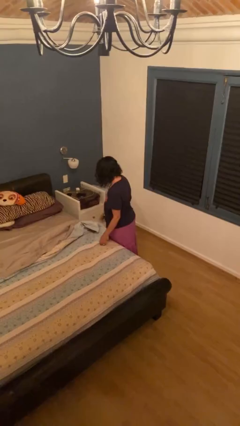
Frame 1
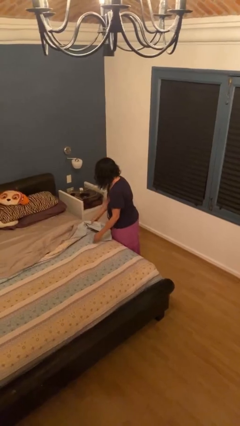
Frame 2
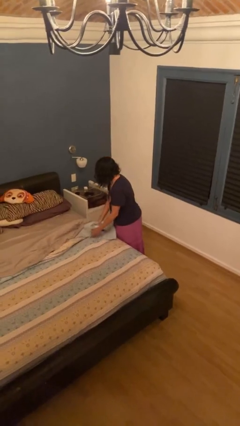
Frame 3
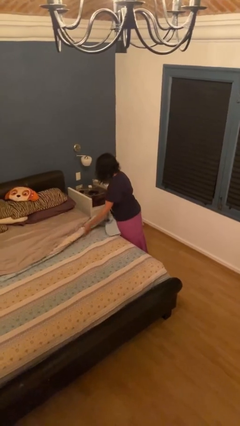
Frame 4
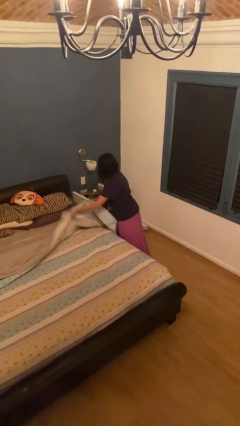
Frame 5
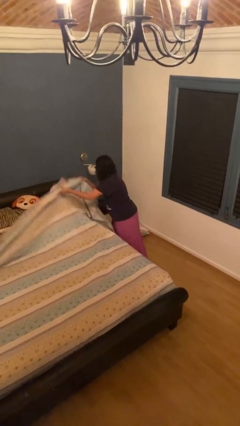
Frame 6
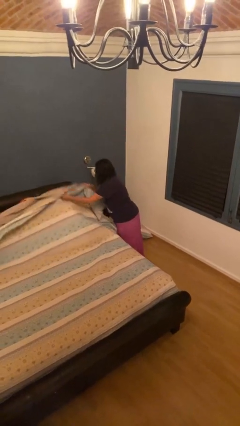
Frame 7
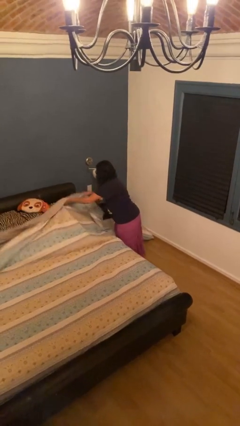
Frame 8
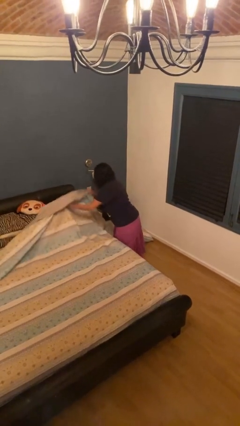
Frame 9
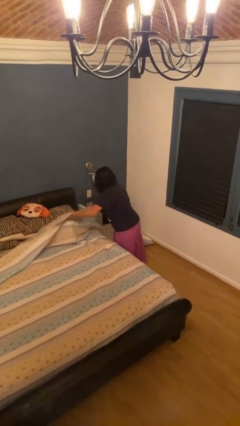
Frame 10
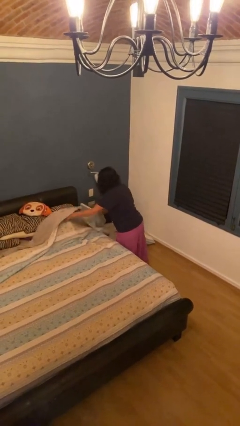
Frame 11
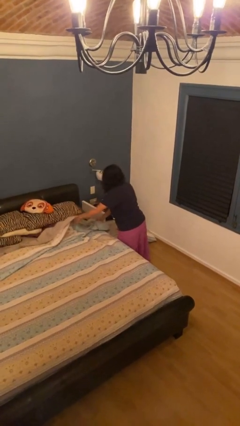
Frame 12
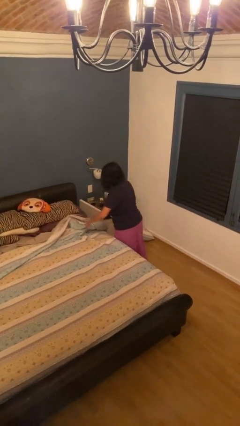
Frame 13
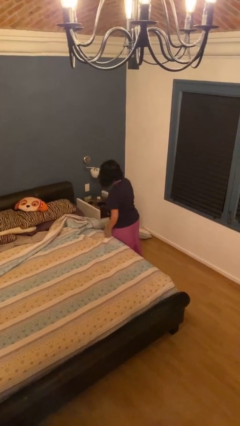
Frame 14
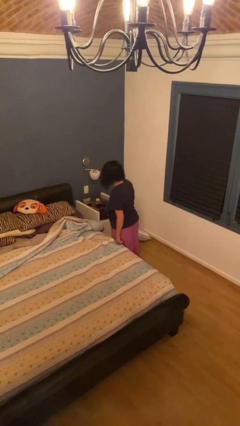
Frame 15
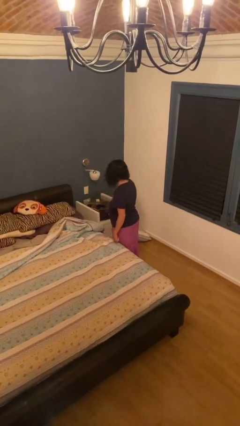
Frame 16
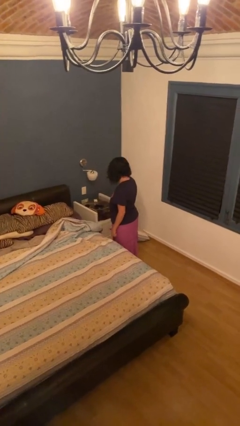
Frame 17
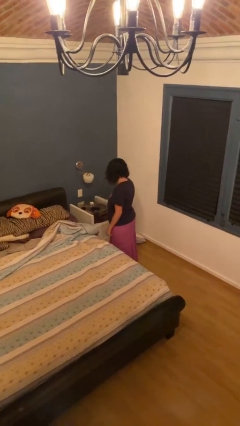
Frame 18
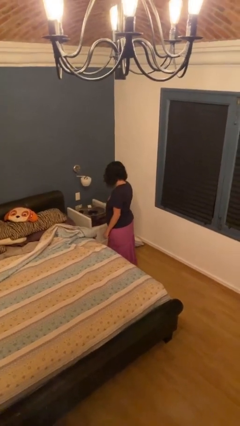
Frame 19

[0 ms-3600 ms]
person makes bed

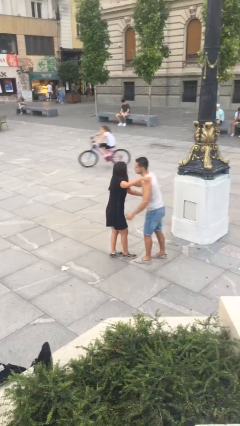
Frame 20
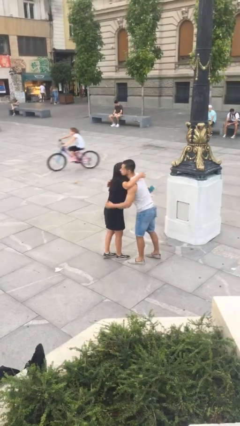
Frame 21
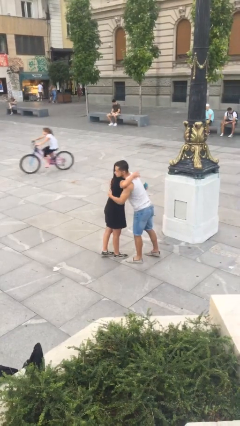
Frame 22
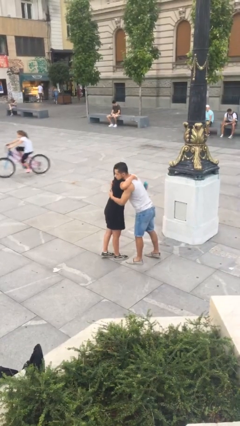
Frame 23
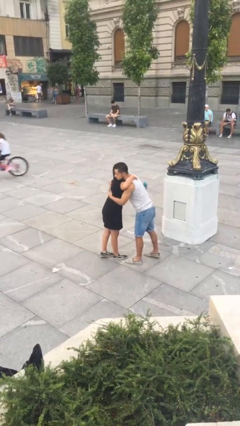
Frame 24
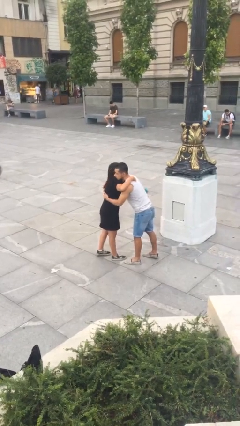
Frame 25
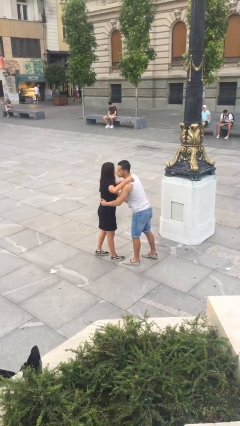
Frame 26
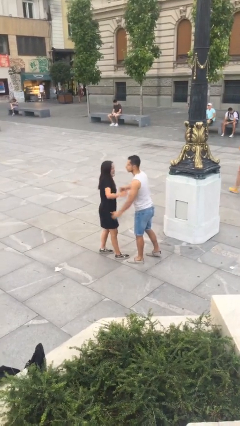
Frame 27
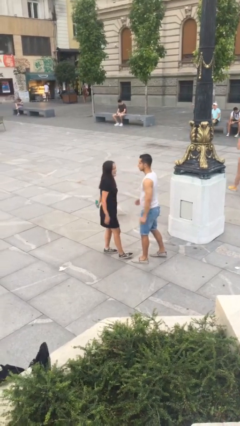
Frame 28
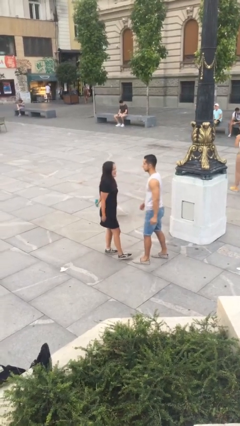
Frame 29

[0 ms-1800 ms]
person embraces person

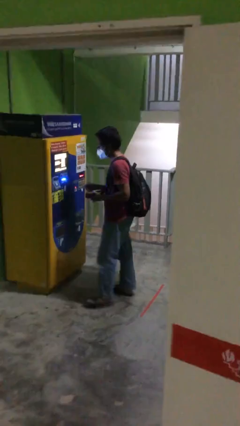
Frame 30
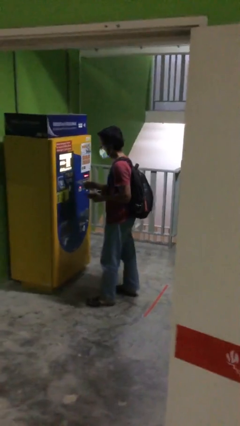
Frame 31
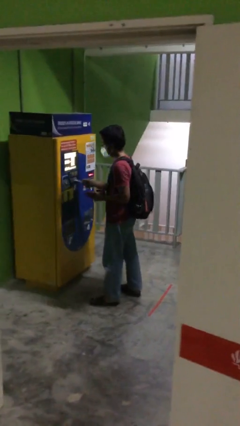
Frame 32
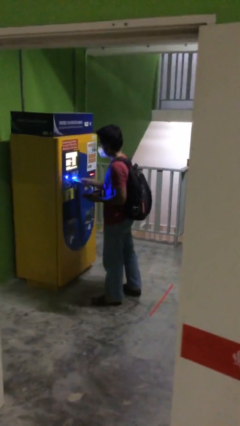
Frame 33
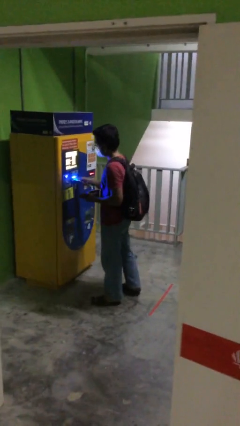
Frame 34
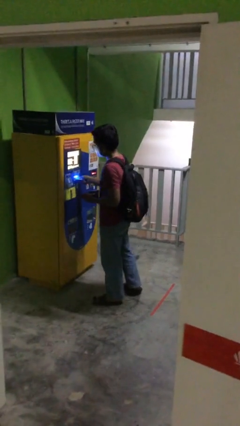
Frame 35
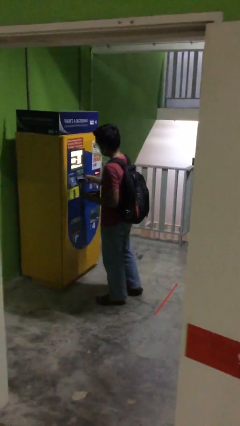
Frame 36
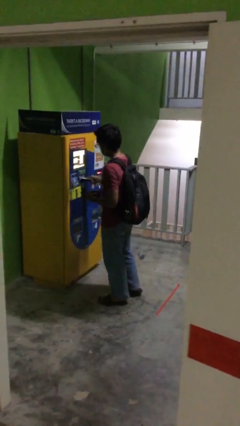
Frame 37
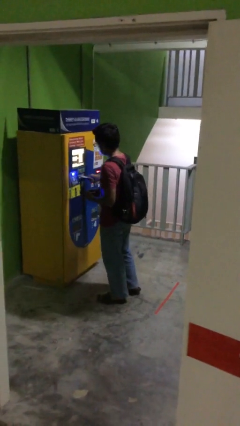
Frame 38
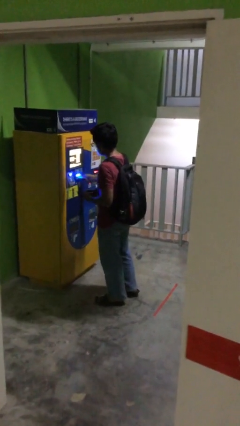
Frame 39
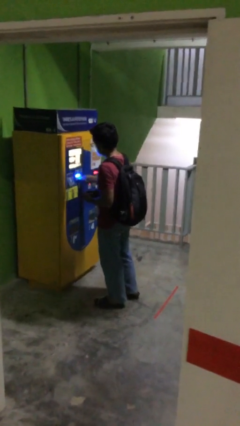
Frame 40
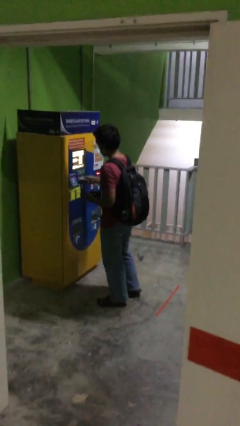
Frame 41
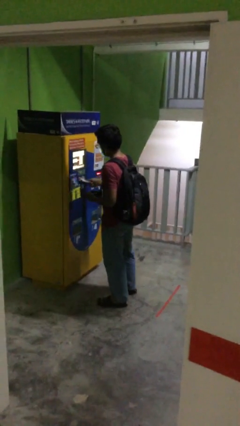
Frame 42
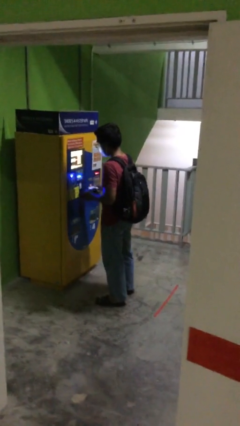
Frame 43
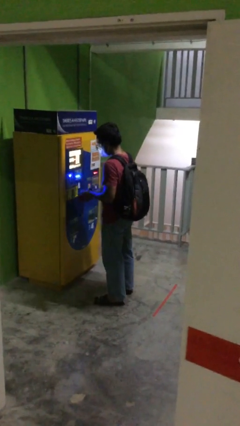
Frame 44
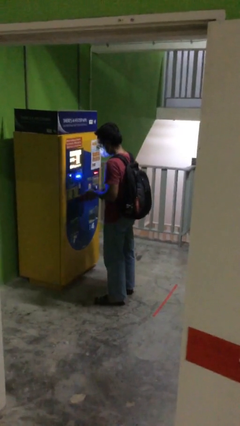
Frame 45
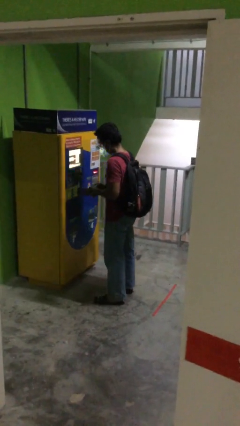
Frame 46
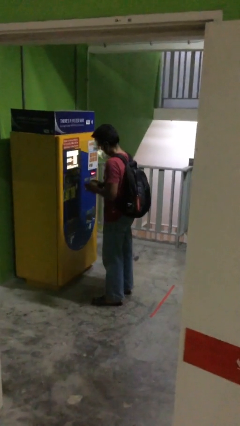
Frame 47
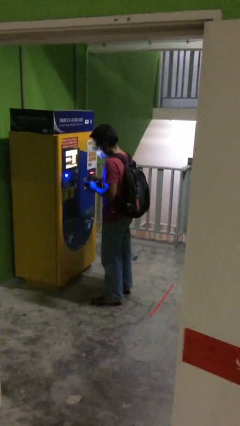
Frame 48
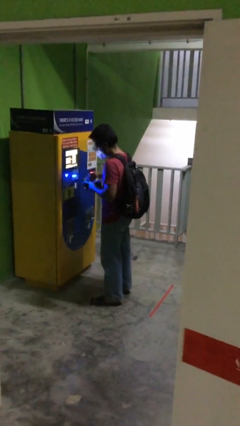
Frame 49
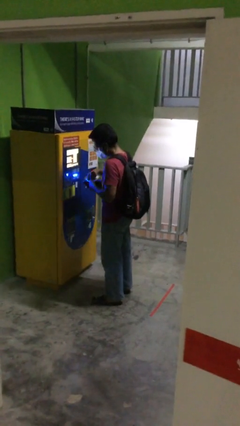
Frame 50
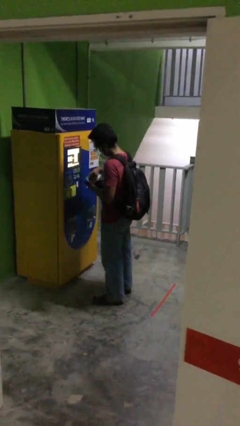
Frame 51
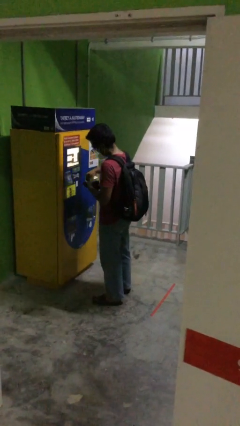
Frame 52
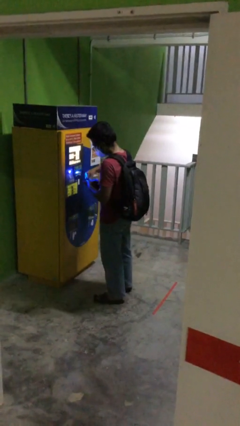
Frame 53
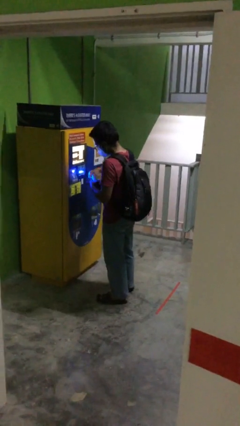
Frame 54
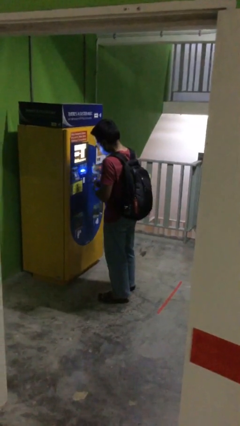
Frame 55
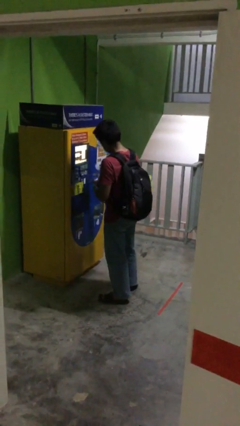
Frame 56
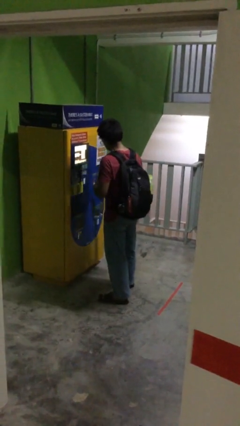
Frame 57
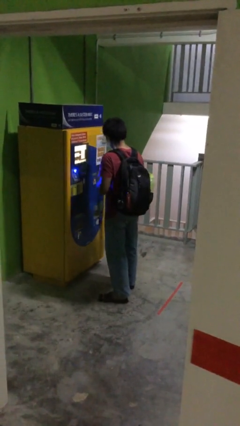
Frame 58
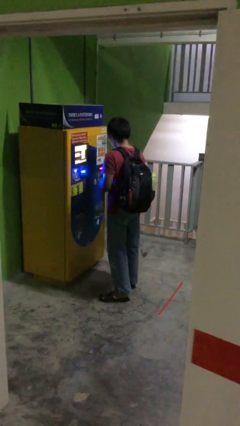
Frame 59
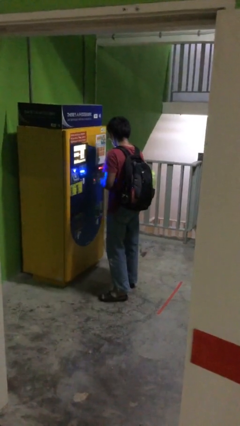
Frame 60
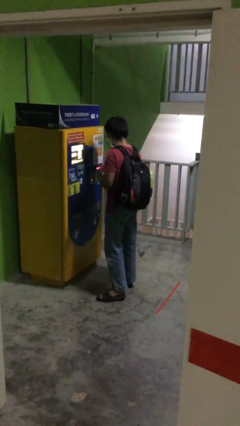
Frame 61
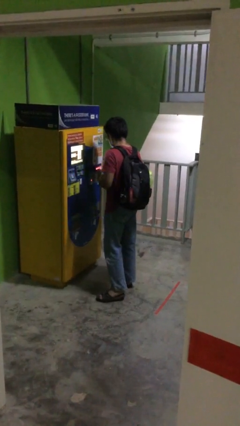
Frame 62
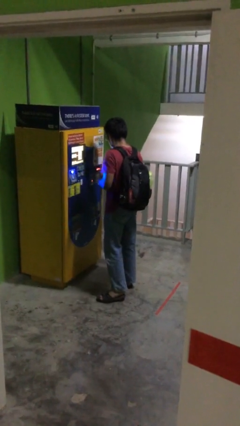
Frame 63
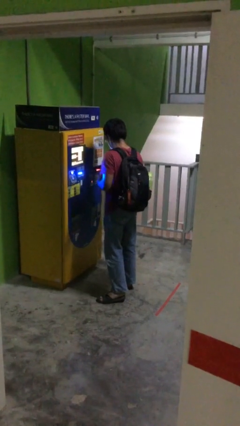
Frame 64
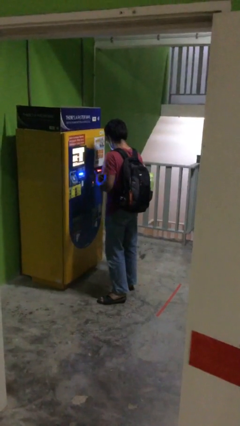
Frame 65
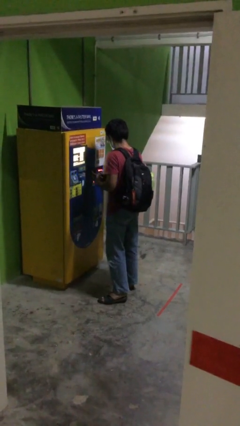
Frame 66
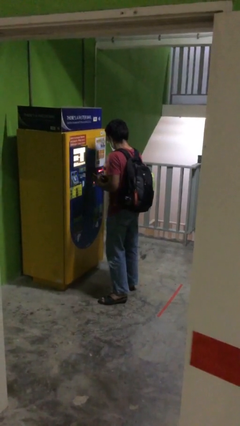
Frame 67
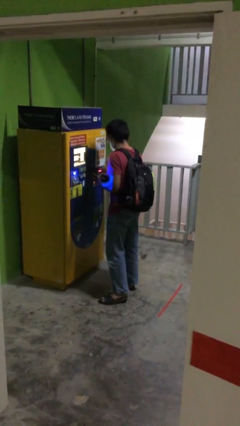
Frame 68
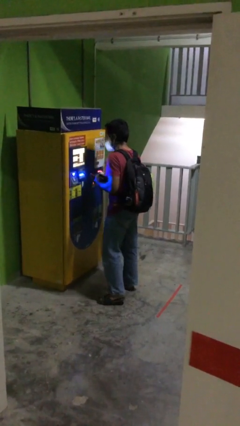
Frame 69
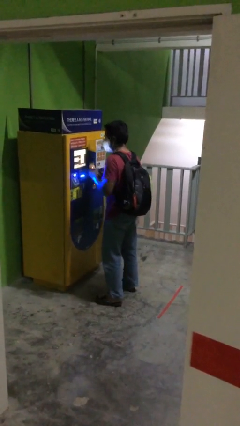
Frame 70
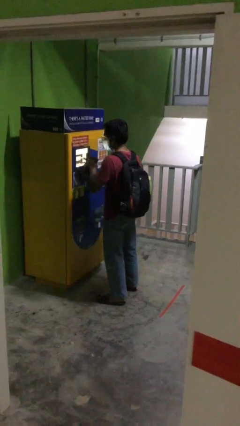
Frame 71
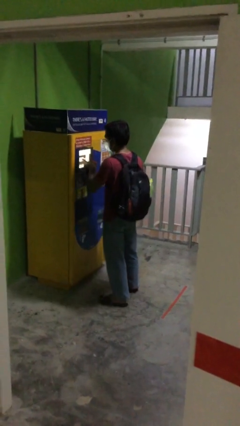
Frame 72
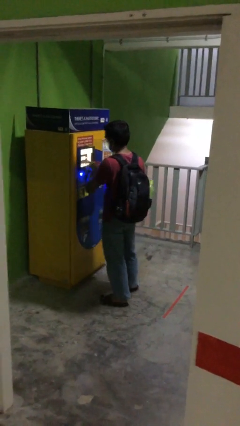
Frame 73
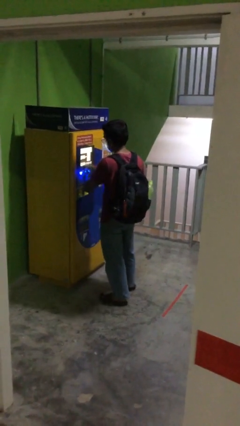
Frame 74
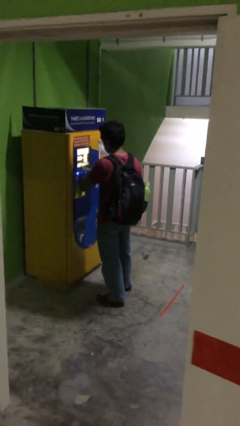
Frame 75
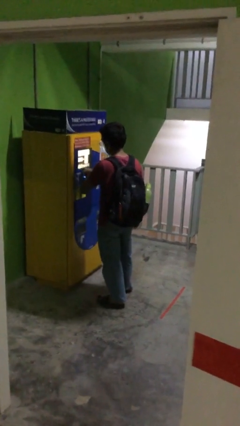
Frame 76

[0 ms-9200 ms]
person purchases from machine

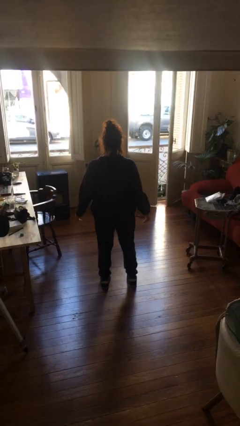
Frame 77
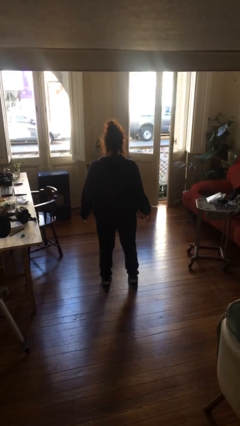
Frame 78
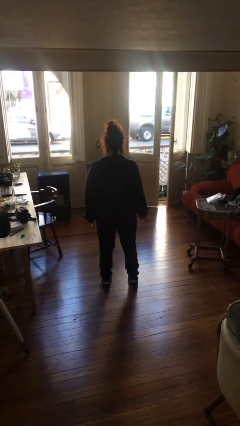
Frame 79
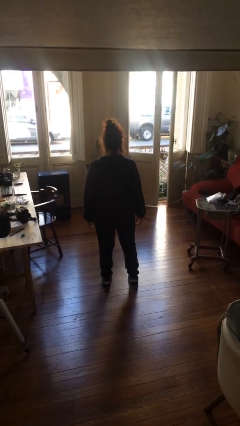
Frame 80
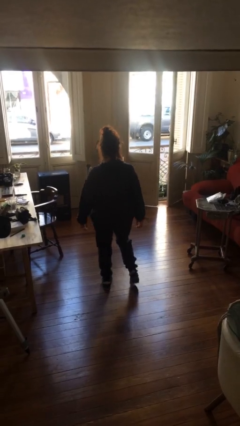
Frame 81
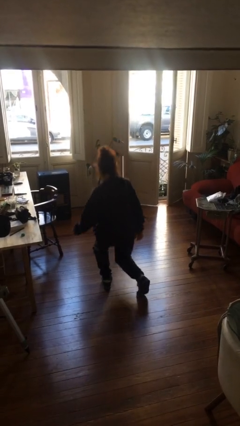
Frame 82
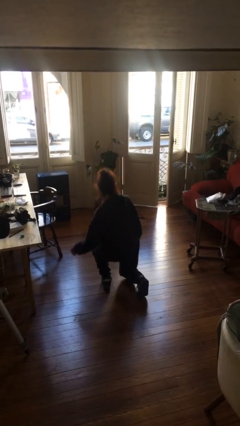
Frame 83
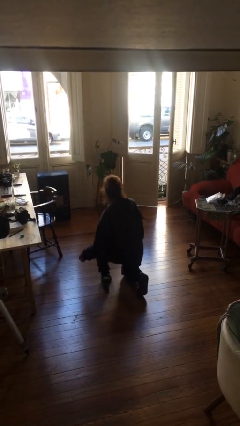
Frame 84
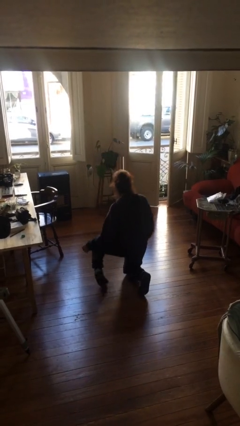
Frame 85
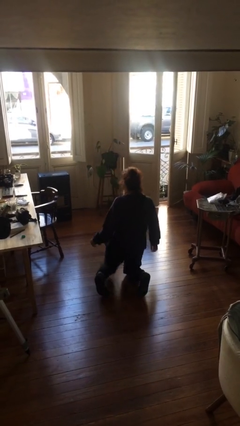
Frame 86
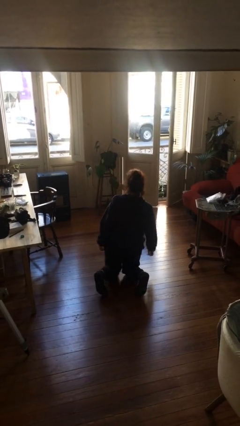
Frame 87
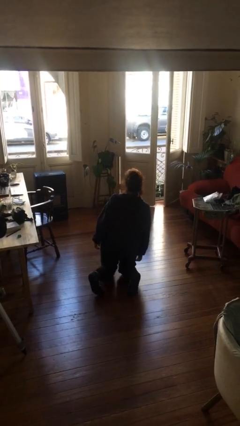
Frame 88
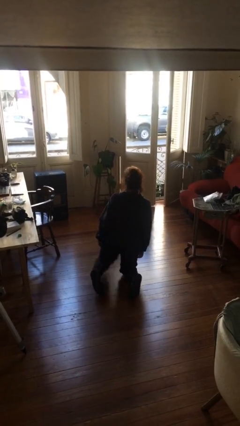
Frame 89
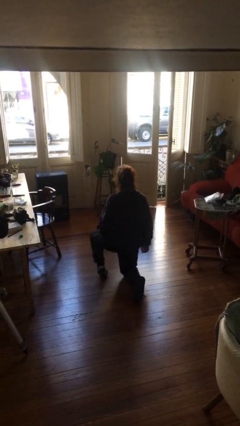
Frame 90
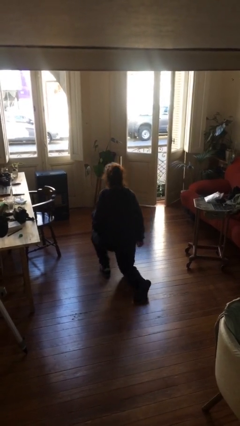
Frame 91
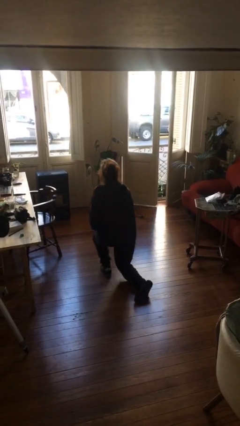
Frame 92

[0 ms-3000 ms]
person kneels

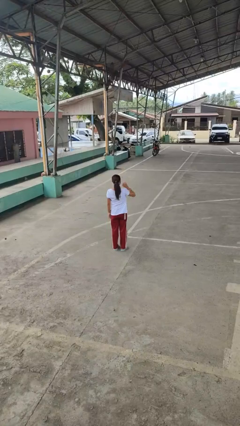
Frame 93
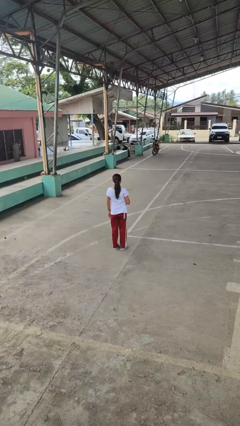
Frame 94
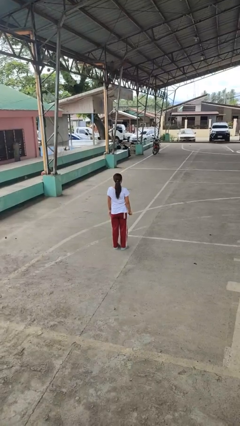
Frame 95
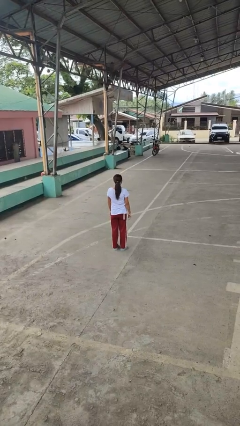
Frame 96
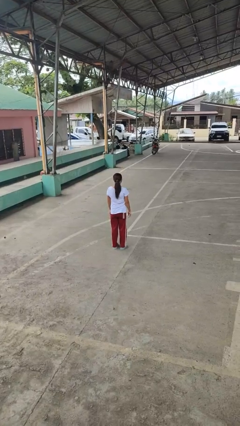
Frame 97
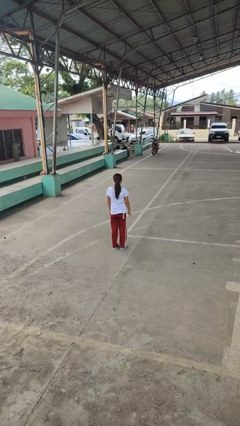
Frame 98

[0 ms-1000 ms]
person gestures lower hand
